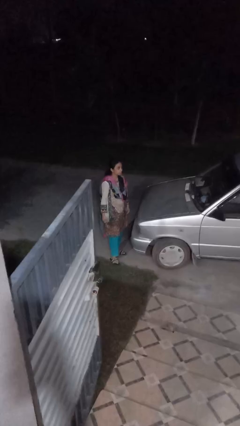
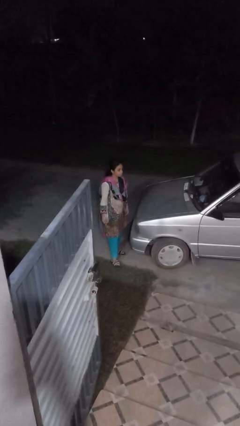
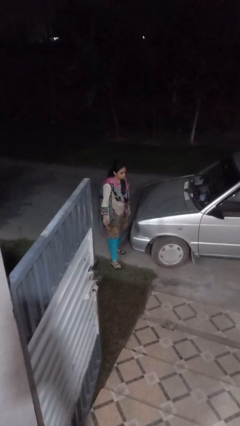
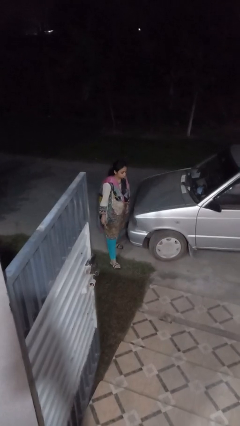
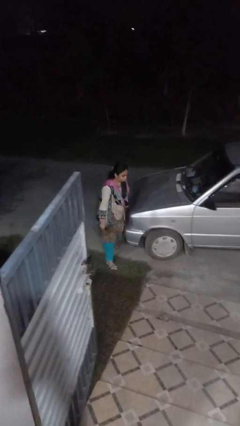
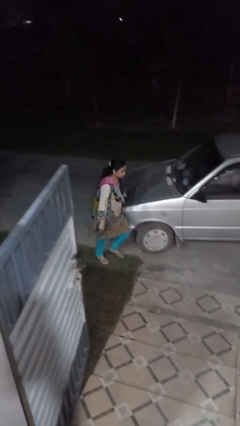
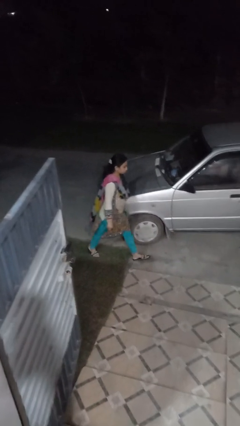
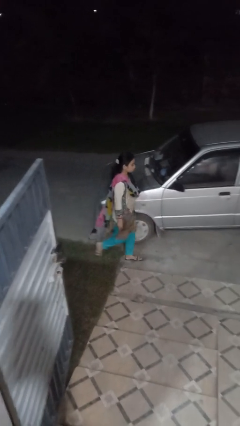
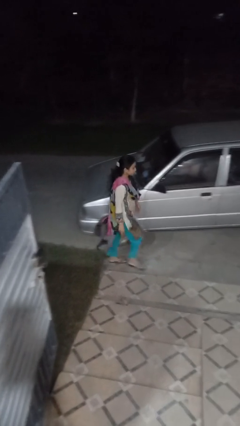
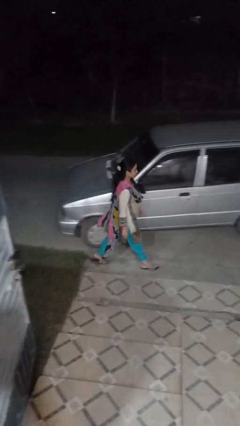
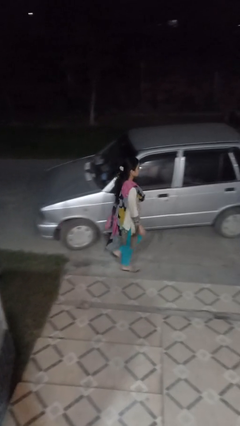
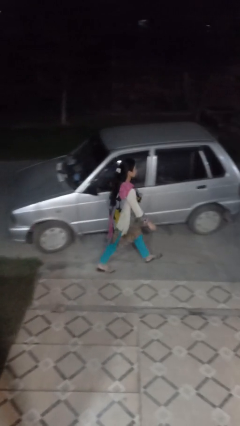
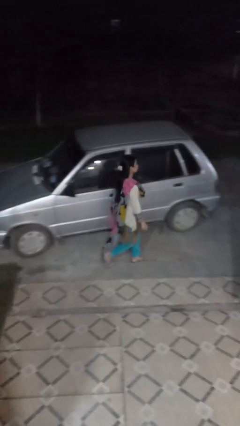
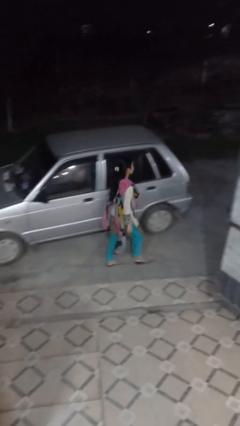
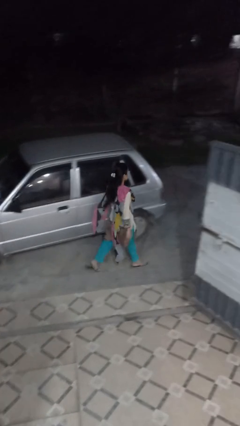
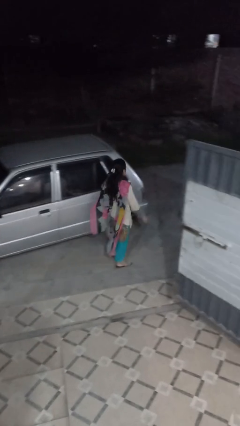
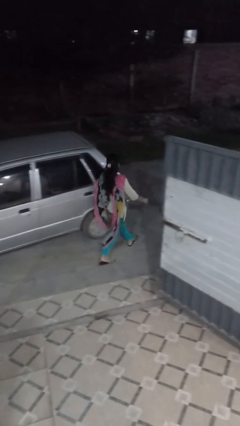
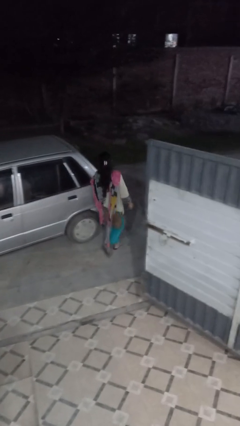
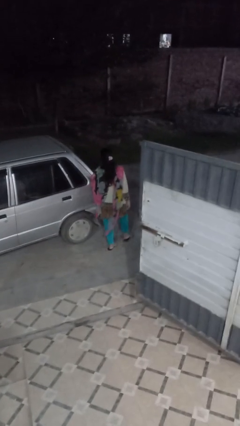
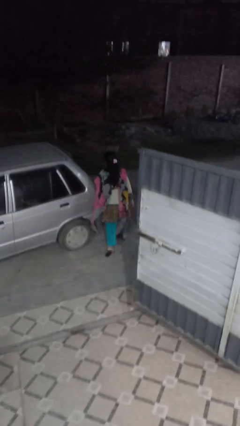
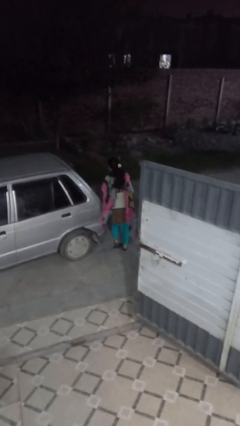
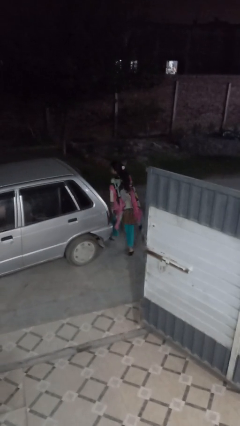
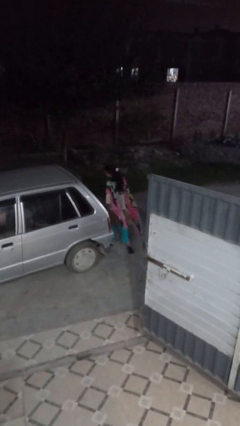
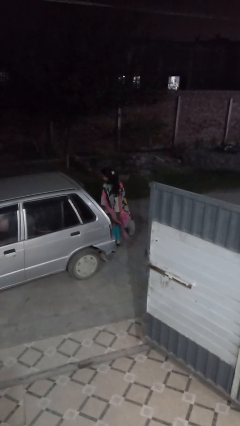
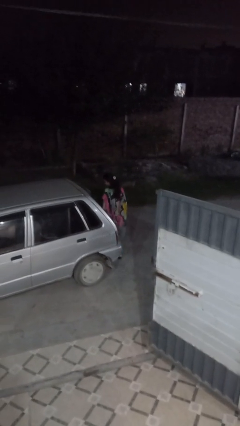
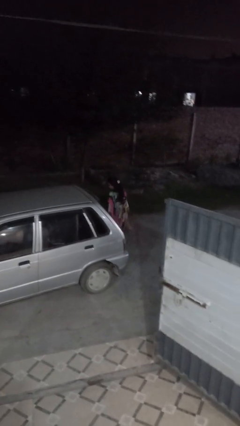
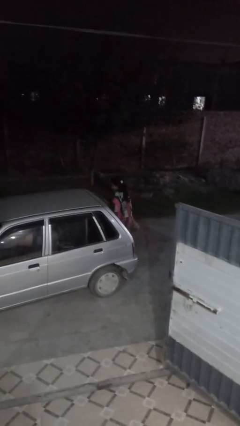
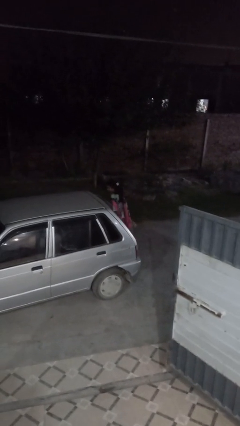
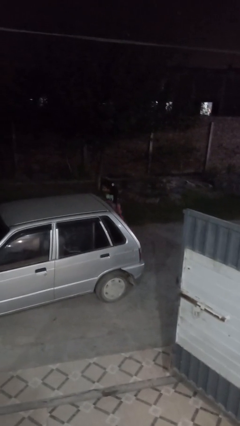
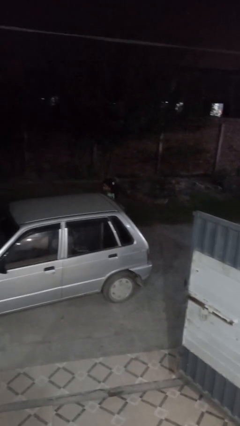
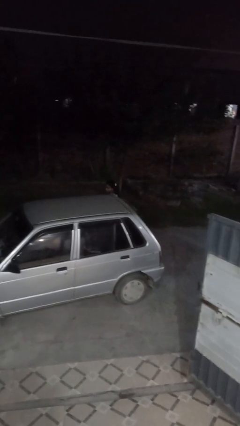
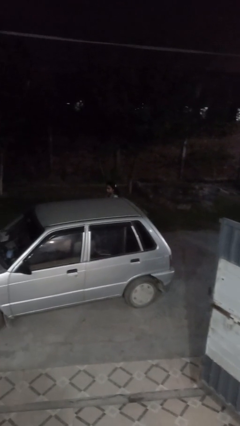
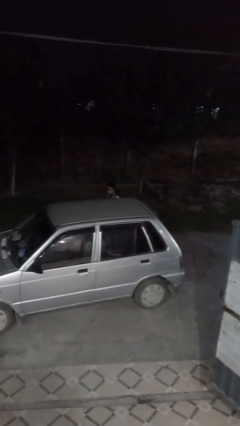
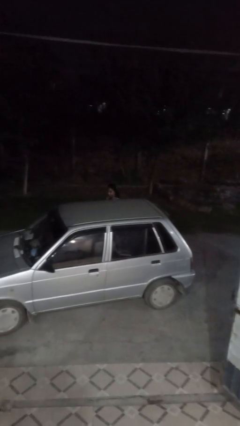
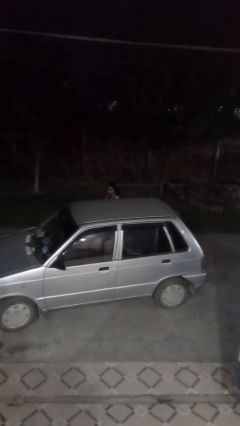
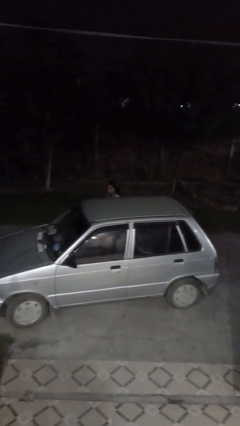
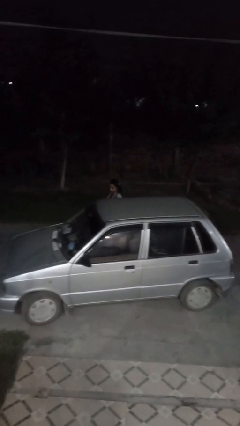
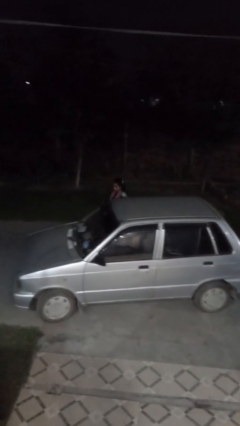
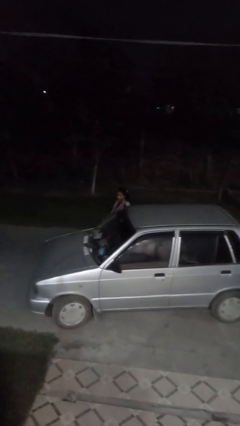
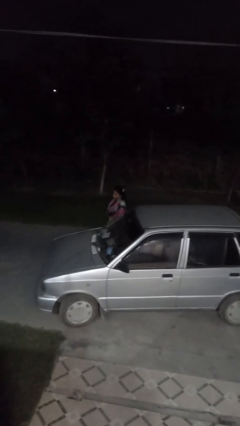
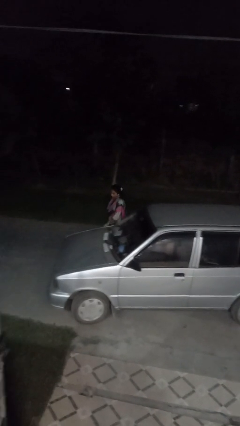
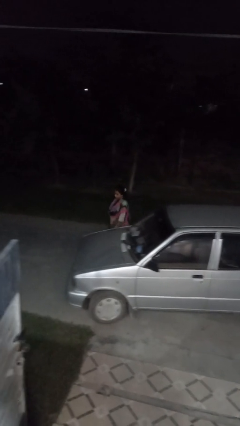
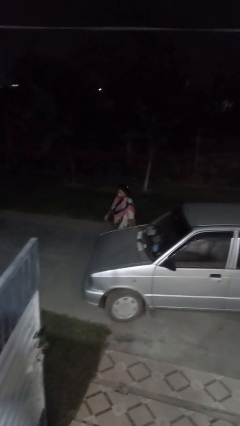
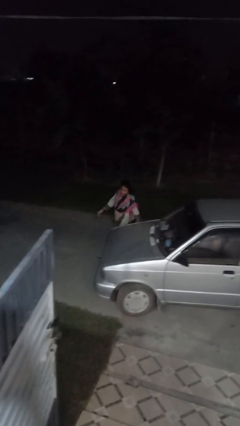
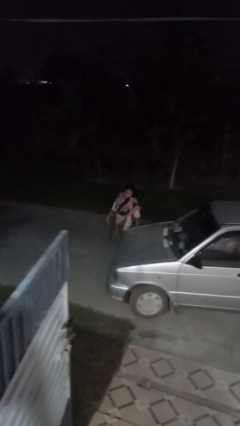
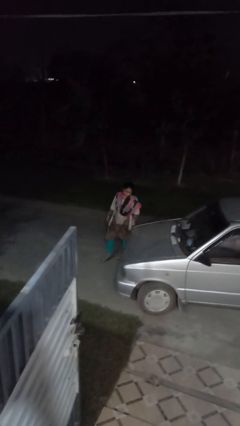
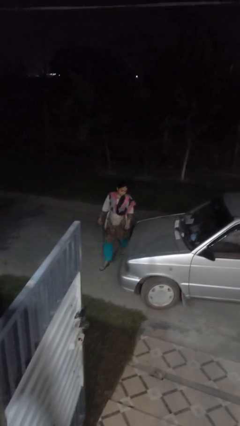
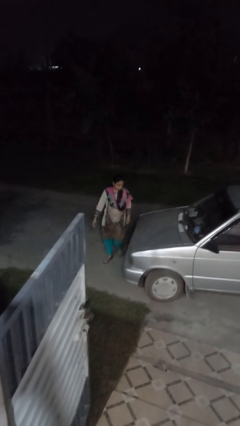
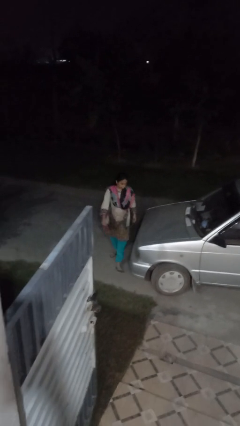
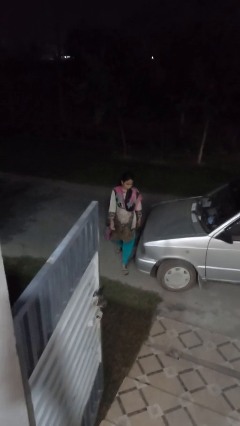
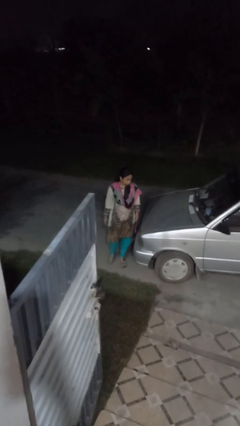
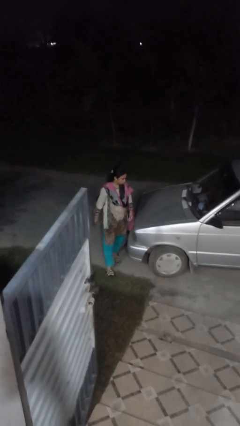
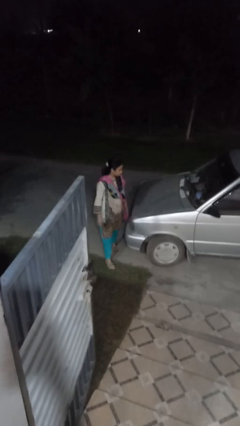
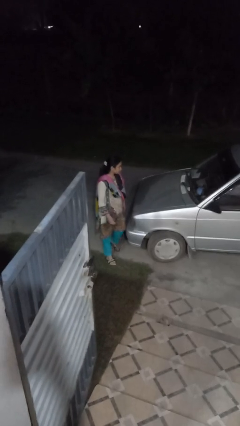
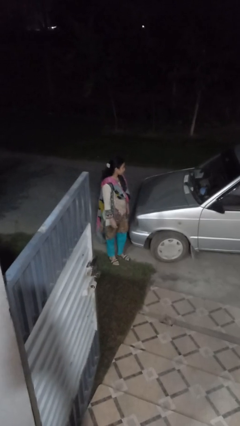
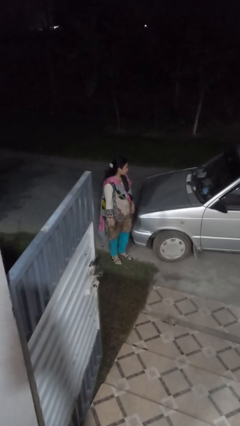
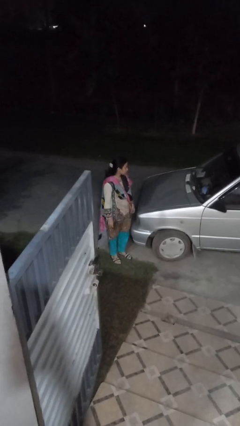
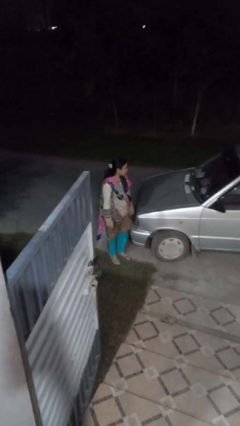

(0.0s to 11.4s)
person walks around car

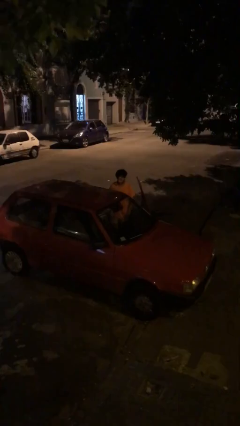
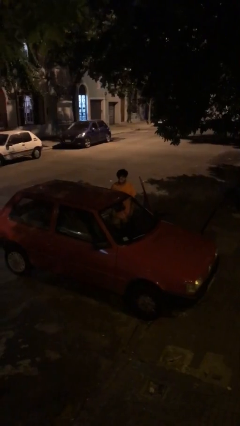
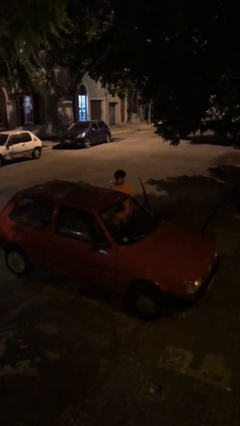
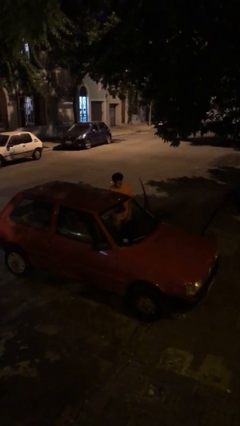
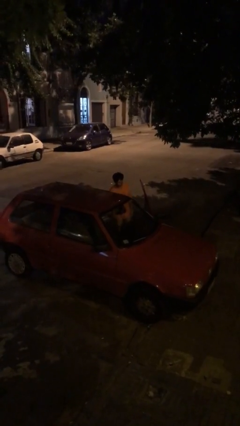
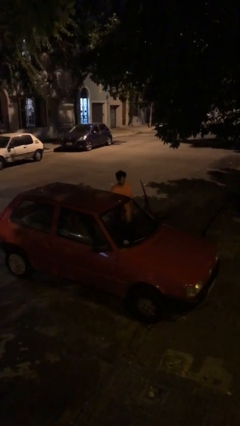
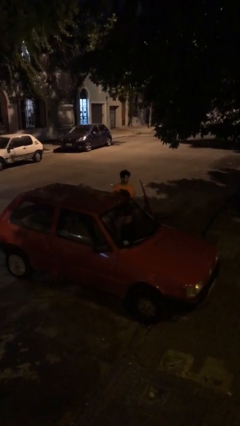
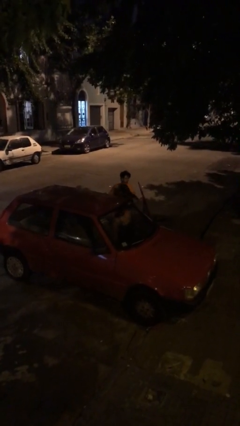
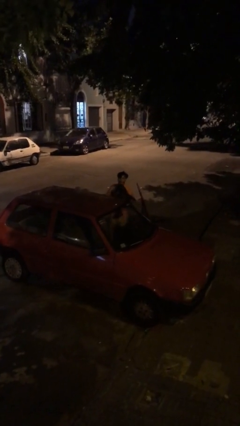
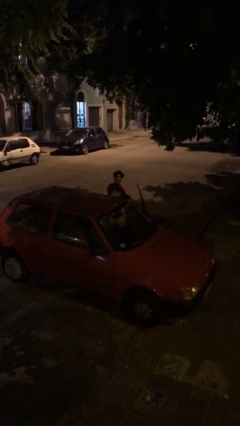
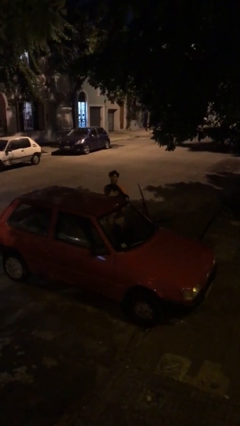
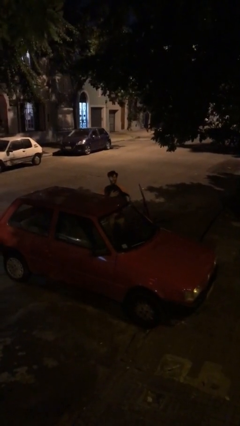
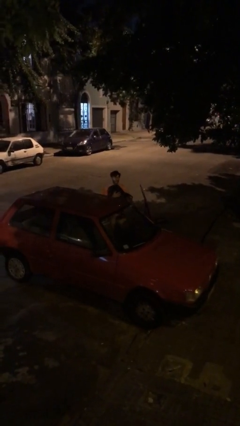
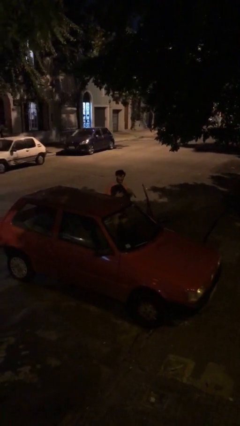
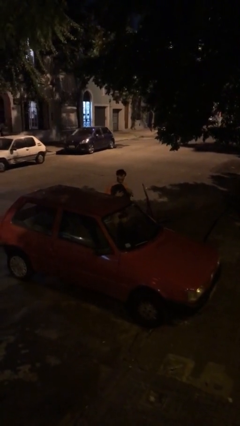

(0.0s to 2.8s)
person unloads car

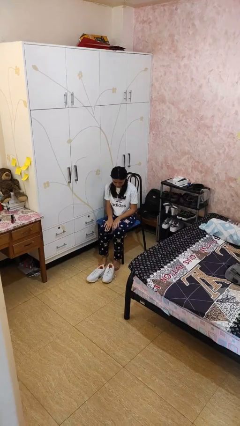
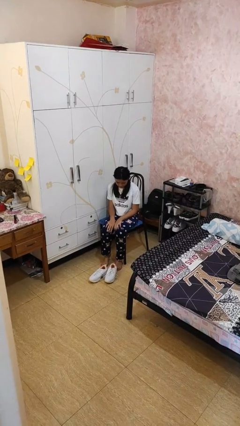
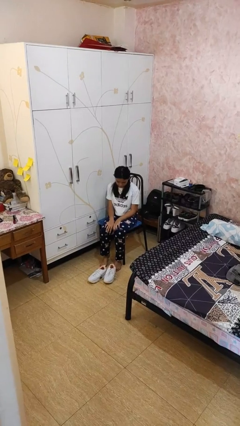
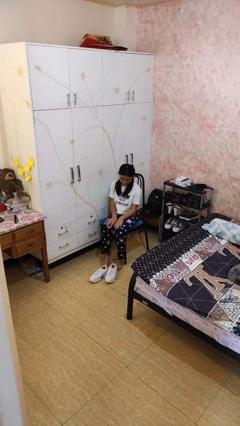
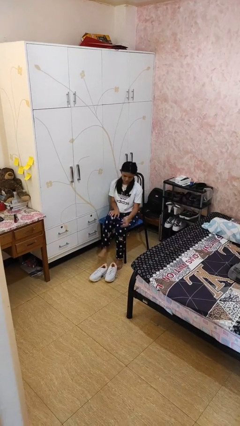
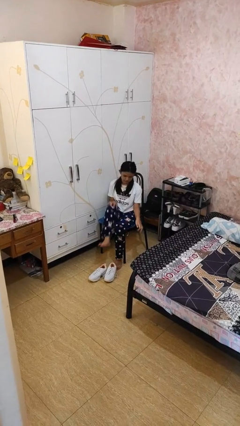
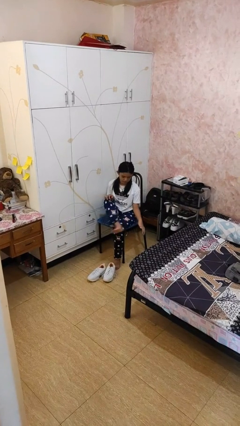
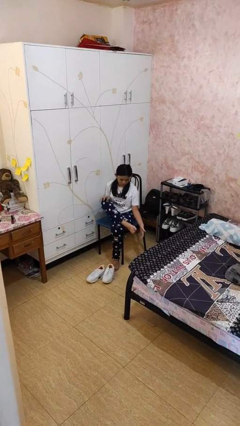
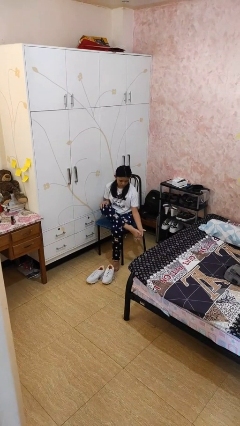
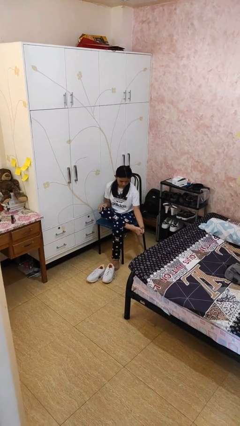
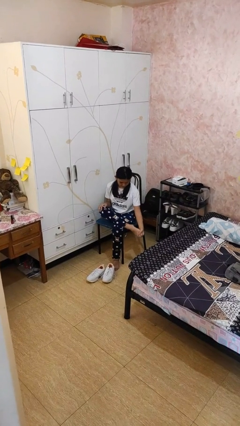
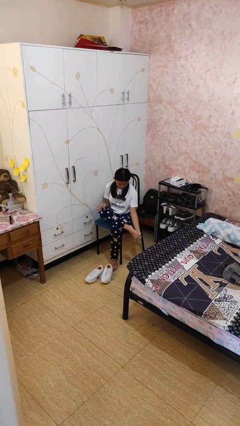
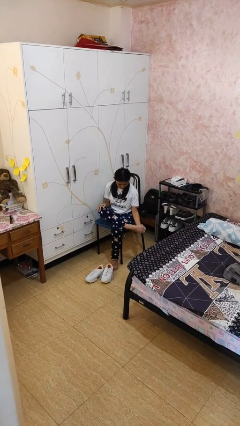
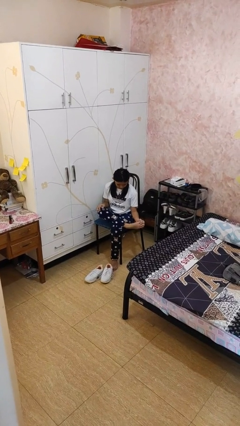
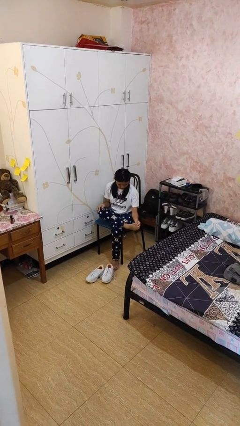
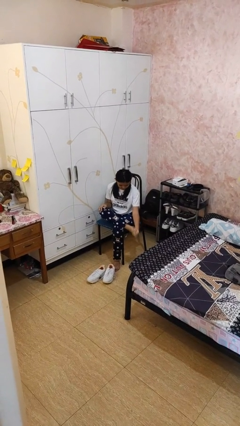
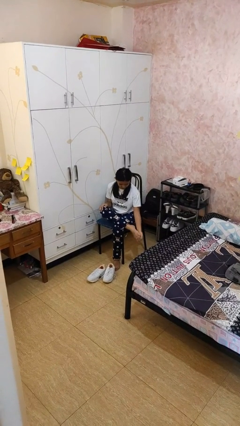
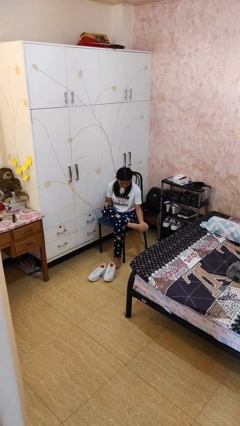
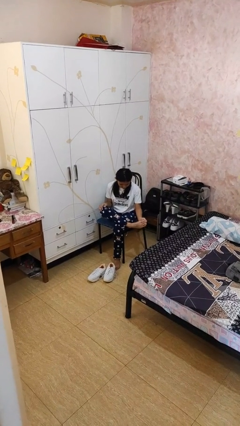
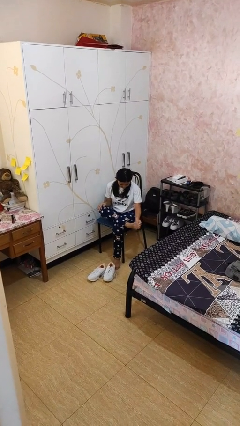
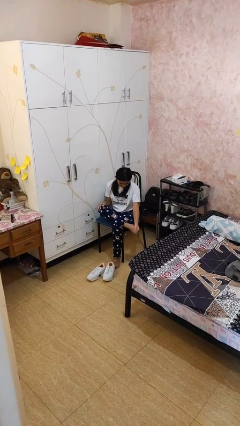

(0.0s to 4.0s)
person rubs foot
